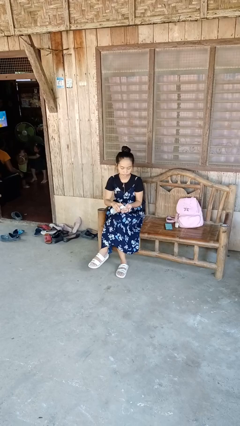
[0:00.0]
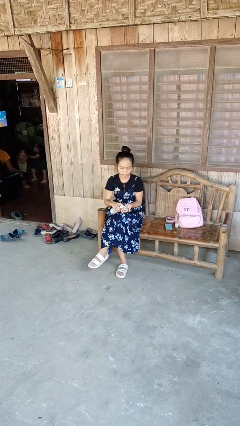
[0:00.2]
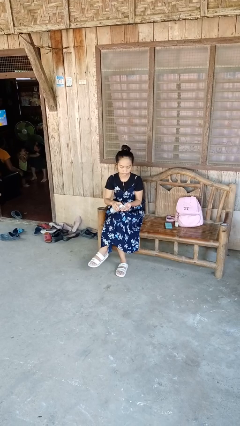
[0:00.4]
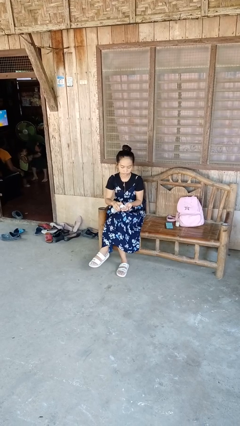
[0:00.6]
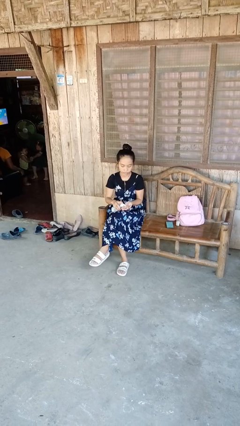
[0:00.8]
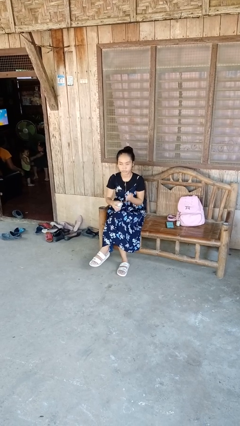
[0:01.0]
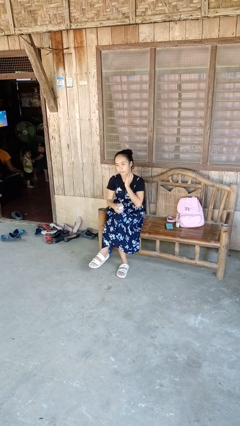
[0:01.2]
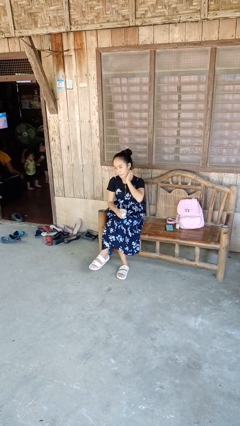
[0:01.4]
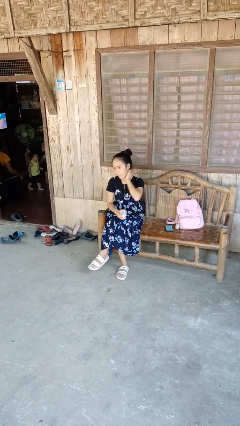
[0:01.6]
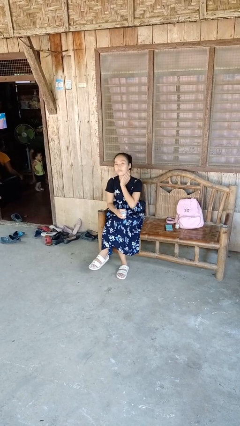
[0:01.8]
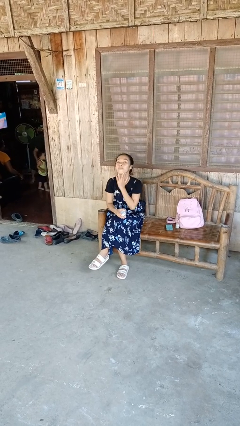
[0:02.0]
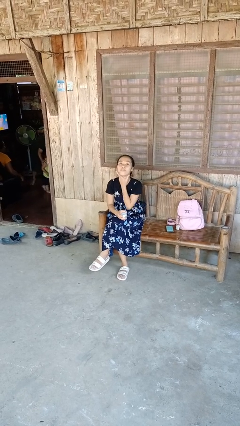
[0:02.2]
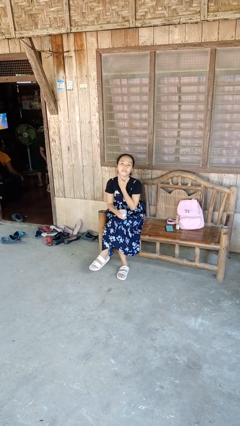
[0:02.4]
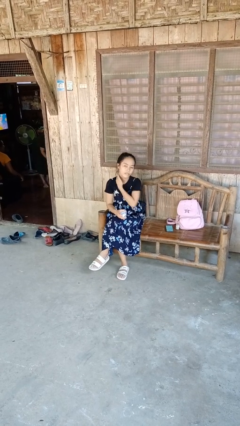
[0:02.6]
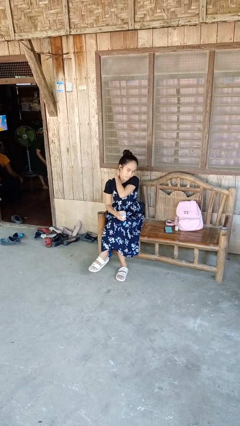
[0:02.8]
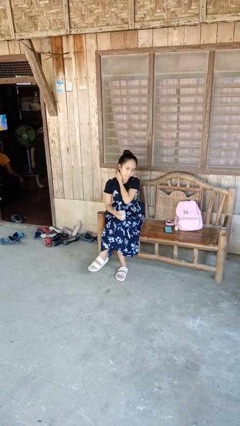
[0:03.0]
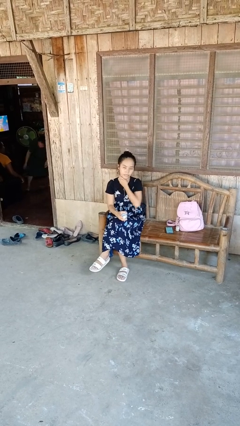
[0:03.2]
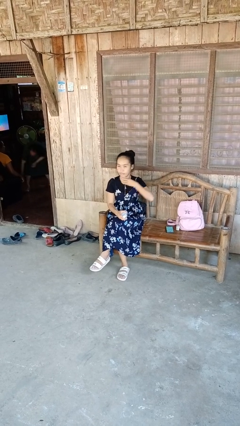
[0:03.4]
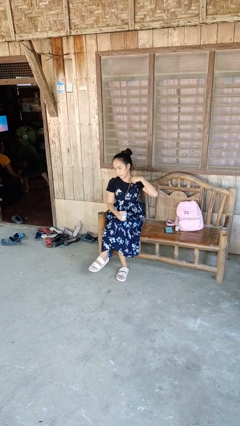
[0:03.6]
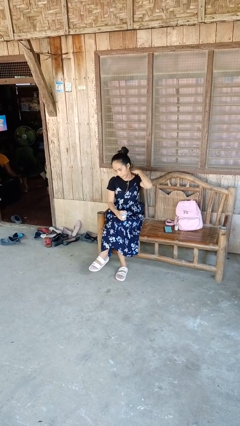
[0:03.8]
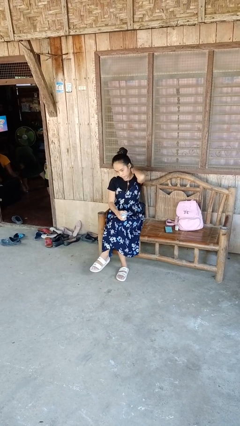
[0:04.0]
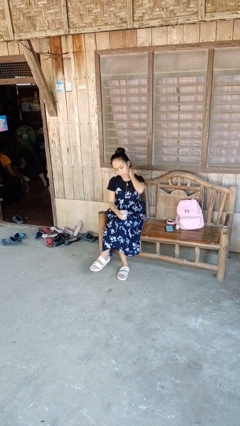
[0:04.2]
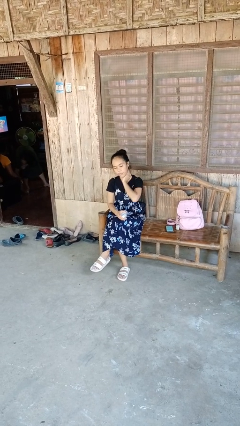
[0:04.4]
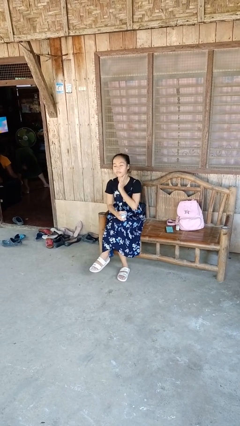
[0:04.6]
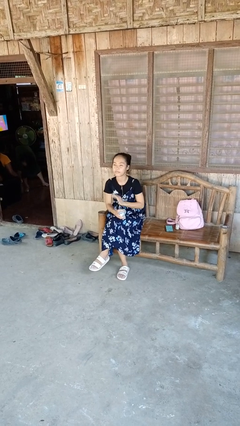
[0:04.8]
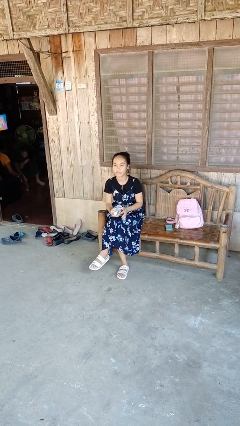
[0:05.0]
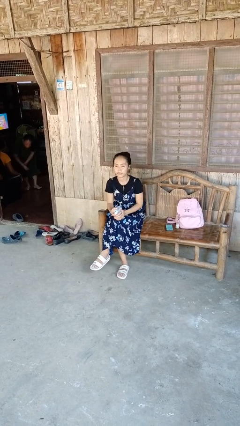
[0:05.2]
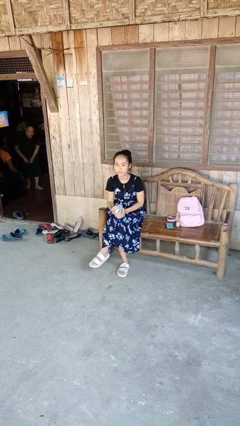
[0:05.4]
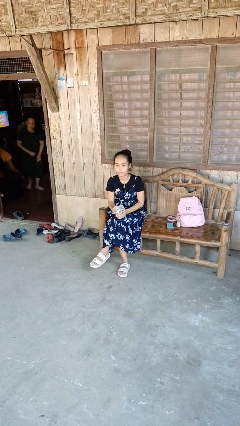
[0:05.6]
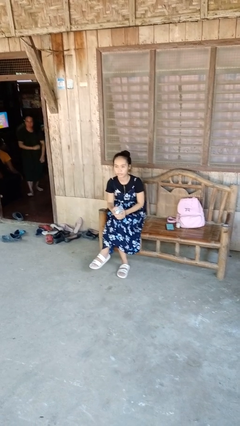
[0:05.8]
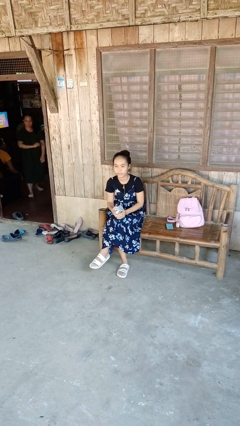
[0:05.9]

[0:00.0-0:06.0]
person applies sunscreen

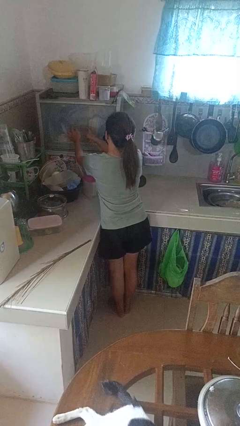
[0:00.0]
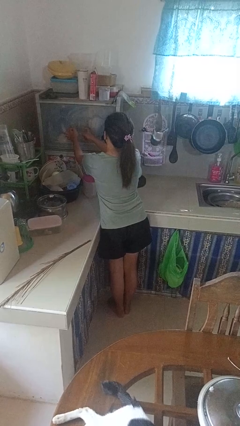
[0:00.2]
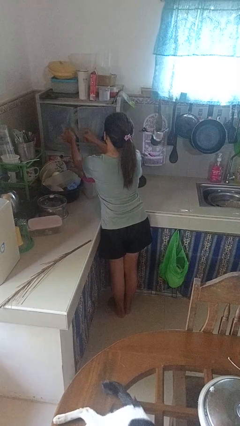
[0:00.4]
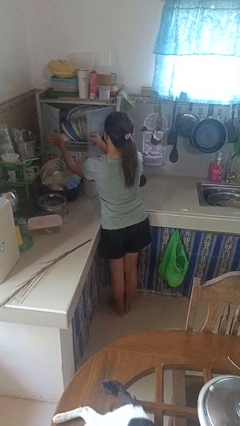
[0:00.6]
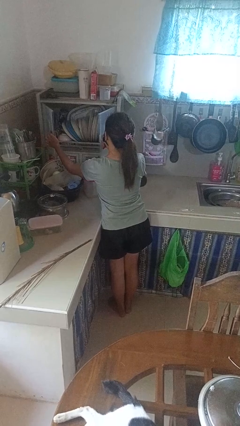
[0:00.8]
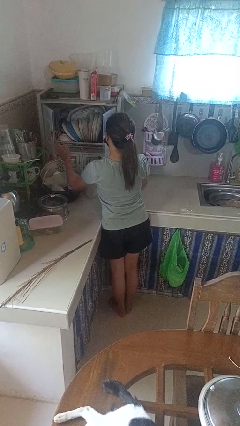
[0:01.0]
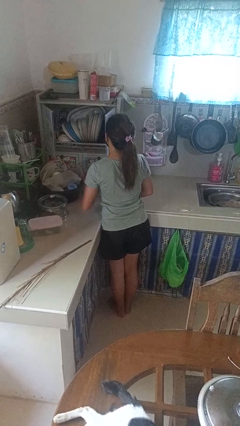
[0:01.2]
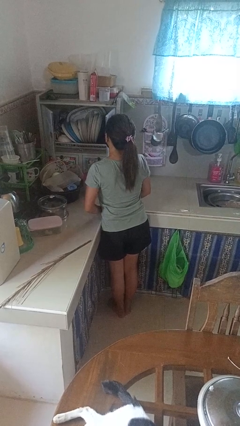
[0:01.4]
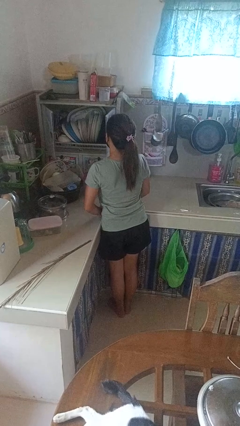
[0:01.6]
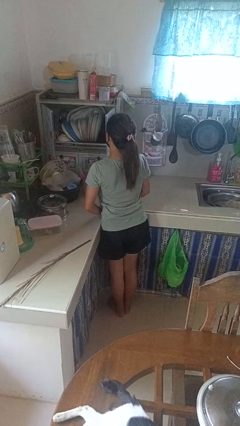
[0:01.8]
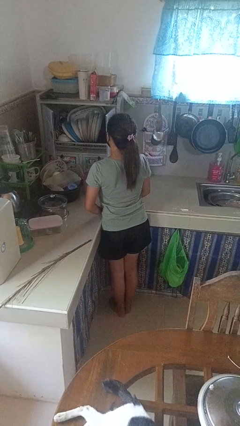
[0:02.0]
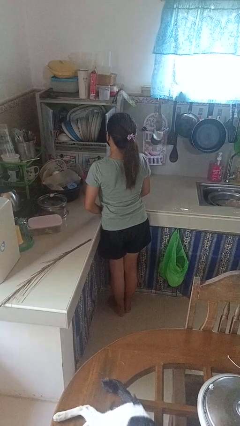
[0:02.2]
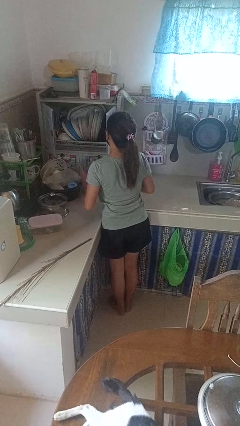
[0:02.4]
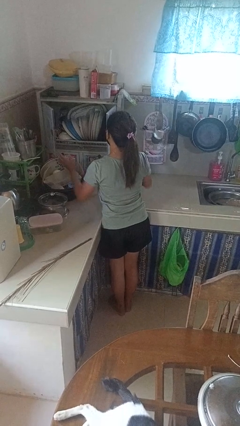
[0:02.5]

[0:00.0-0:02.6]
person opens kitchen drawer

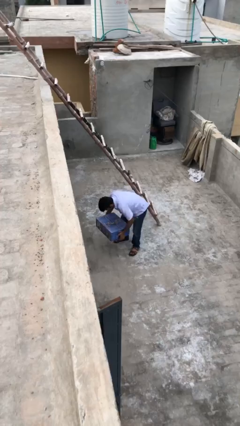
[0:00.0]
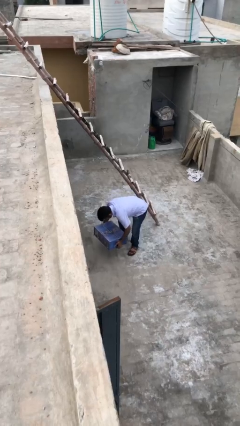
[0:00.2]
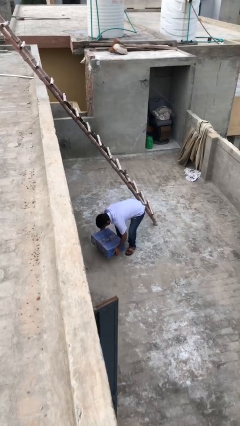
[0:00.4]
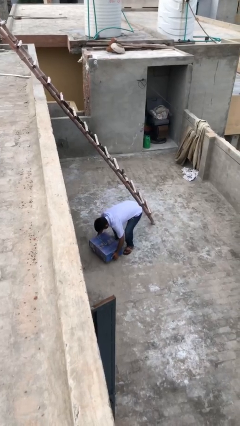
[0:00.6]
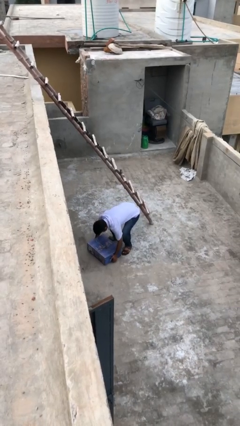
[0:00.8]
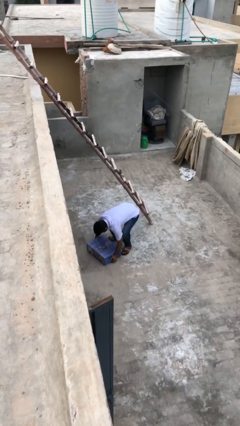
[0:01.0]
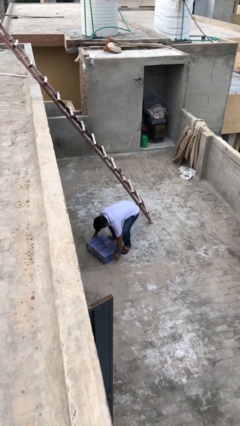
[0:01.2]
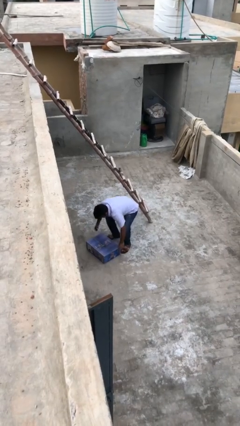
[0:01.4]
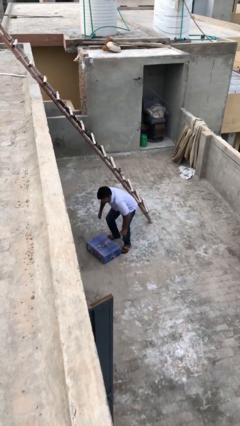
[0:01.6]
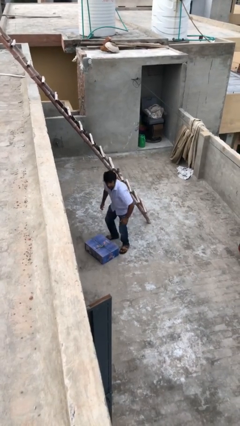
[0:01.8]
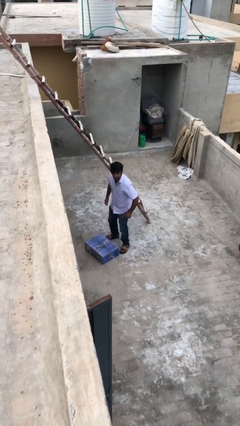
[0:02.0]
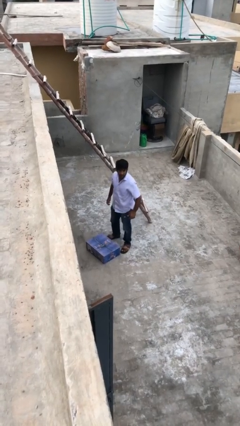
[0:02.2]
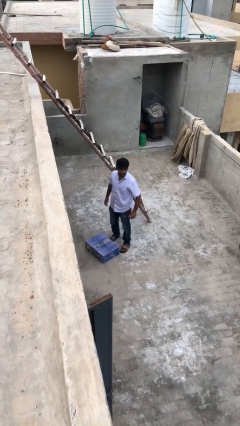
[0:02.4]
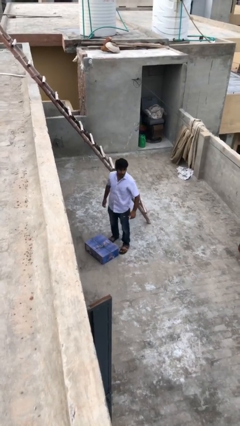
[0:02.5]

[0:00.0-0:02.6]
person puts down object on floor

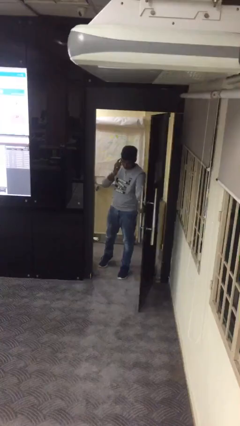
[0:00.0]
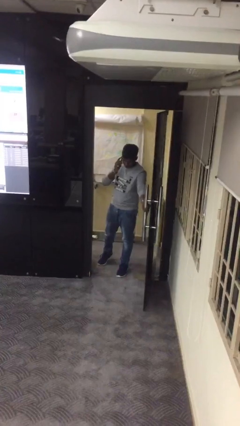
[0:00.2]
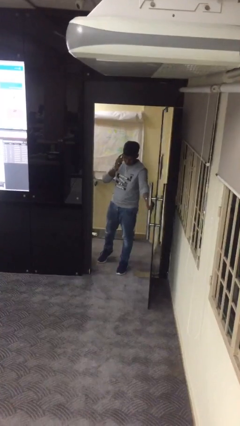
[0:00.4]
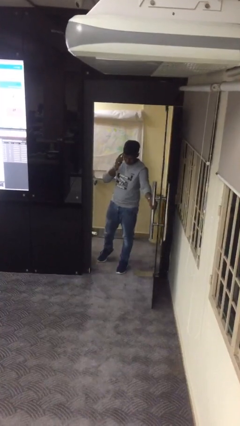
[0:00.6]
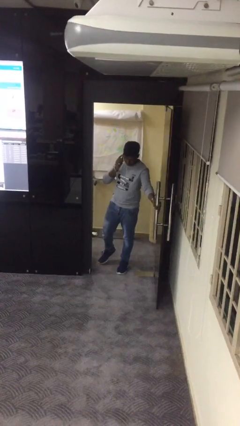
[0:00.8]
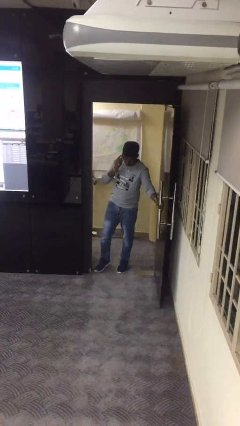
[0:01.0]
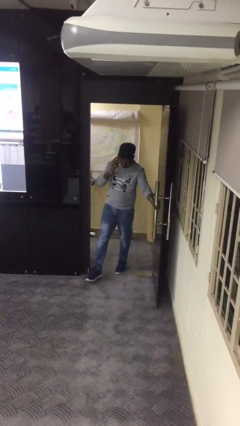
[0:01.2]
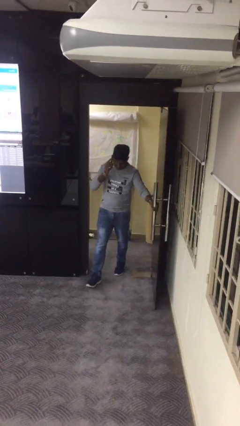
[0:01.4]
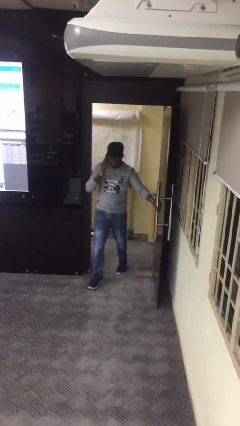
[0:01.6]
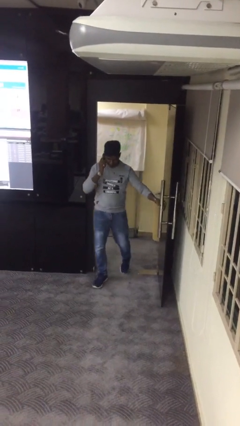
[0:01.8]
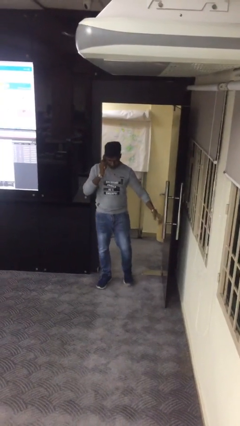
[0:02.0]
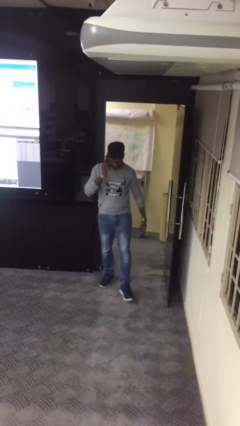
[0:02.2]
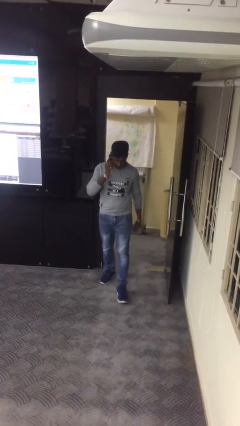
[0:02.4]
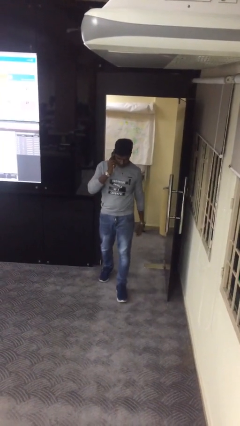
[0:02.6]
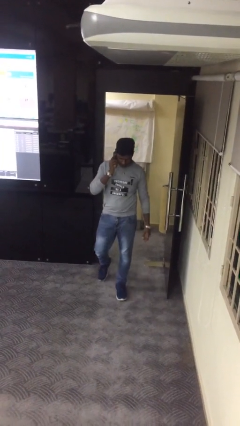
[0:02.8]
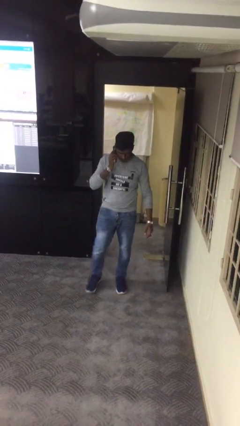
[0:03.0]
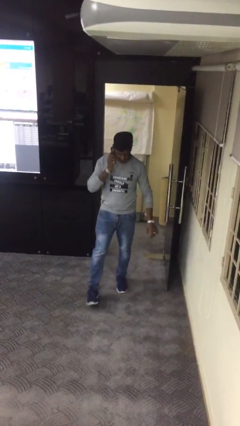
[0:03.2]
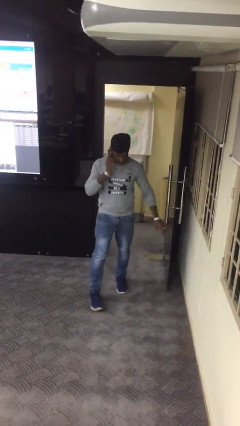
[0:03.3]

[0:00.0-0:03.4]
person enters scene through structure

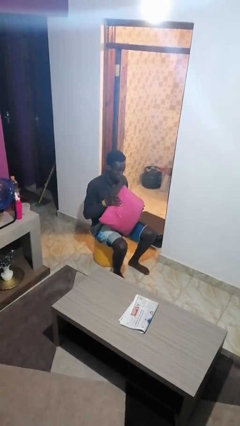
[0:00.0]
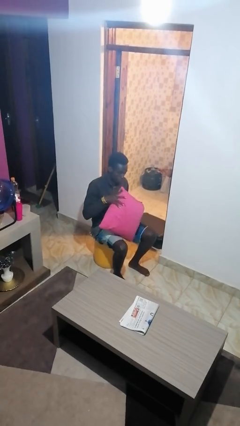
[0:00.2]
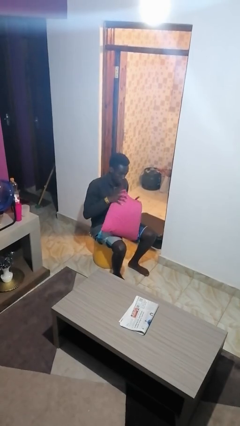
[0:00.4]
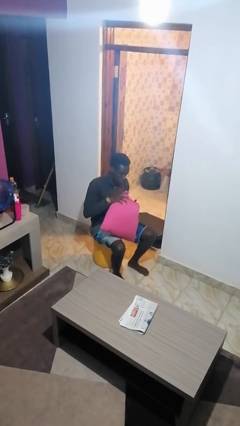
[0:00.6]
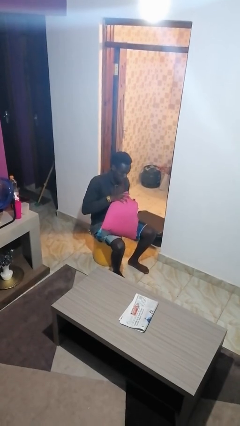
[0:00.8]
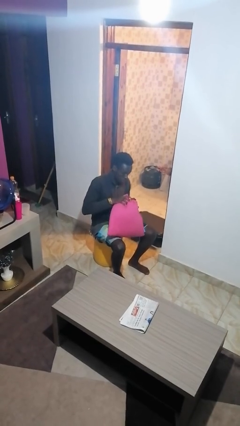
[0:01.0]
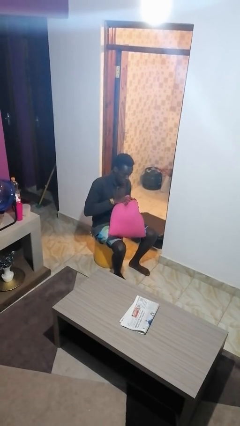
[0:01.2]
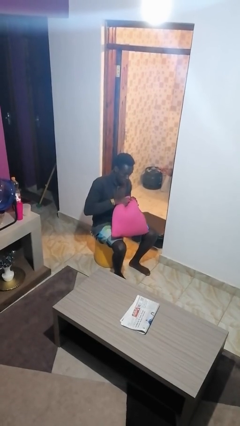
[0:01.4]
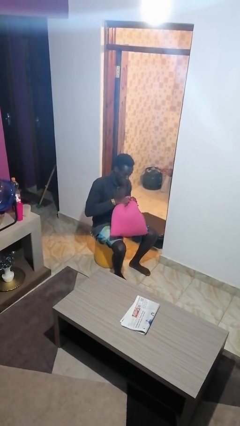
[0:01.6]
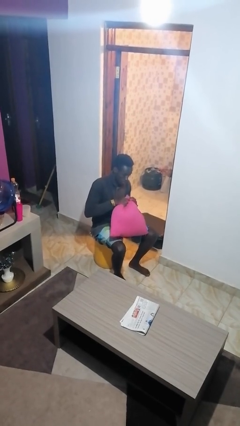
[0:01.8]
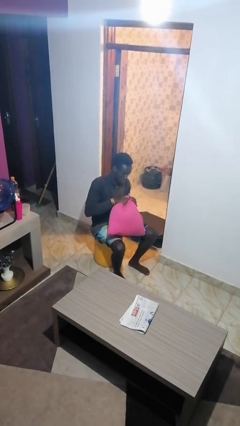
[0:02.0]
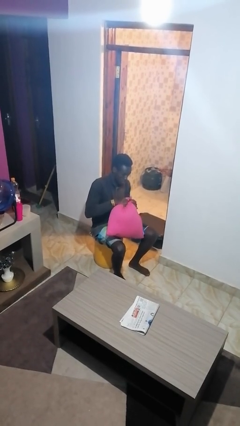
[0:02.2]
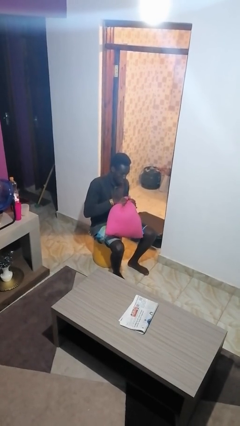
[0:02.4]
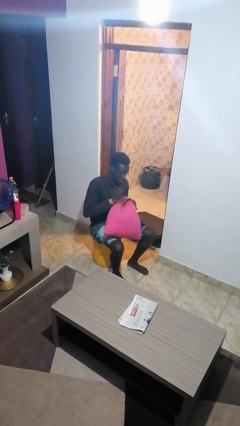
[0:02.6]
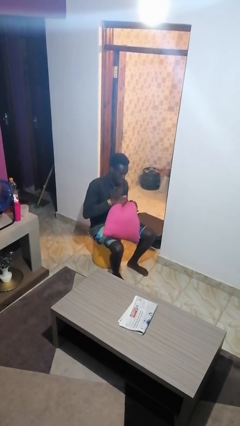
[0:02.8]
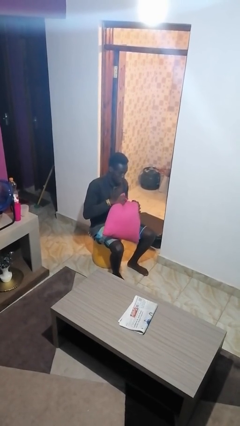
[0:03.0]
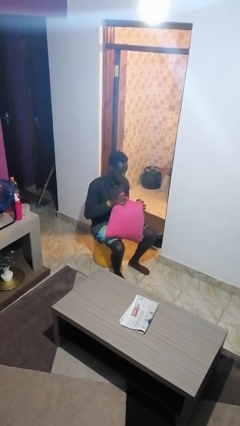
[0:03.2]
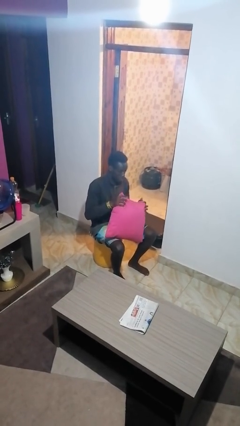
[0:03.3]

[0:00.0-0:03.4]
person squeezes object
